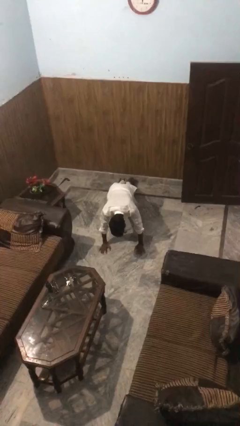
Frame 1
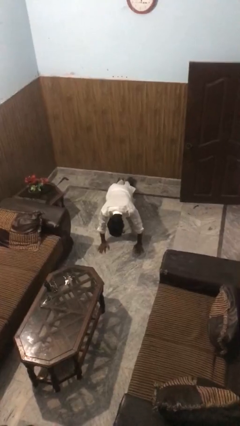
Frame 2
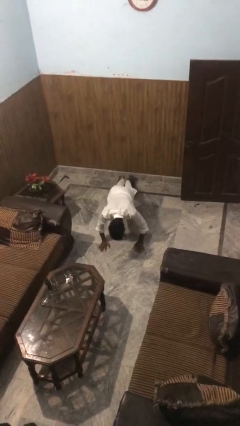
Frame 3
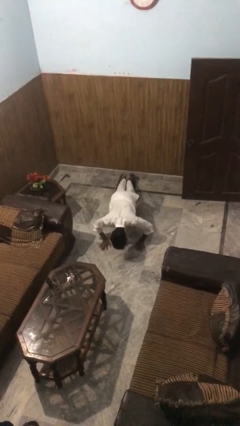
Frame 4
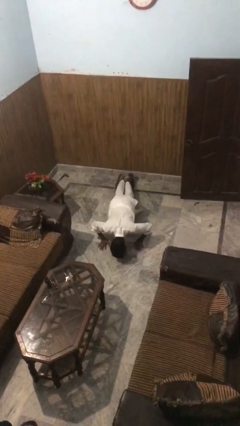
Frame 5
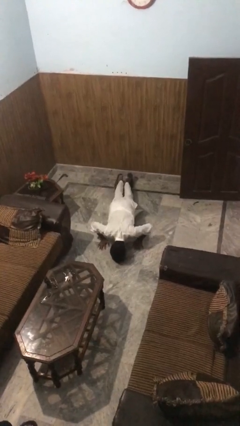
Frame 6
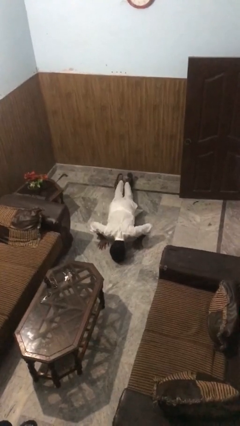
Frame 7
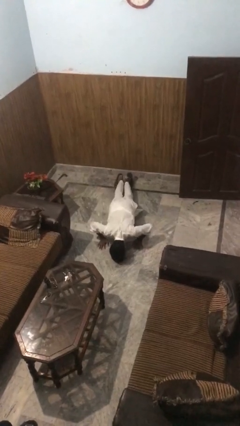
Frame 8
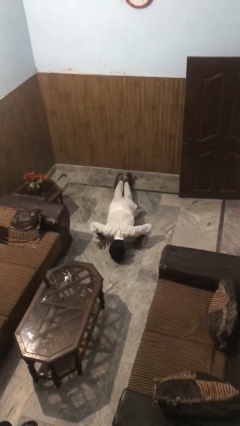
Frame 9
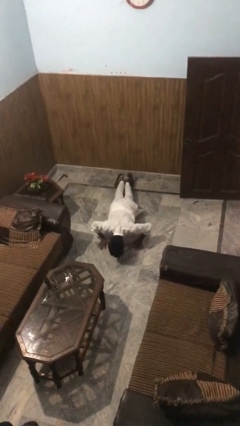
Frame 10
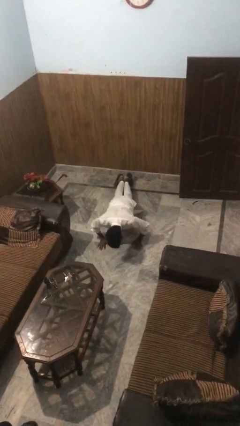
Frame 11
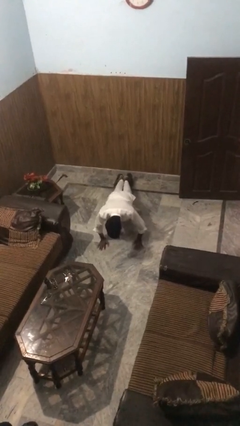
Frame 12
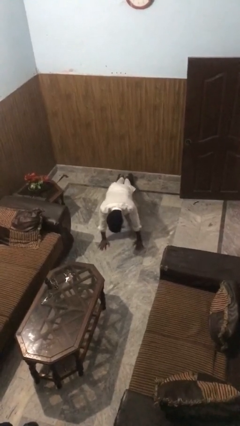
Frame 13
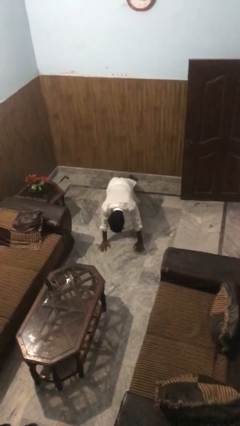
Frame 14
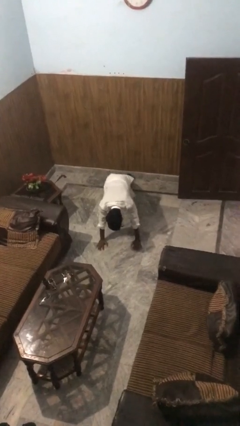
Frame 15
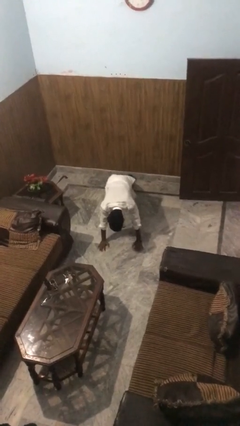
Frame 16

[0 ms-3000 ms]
person exercises with pushup

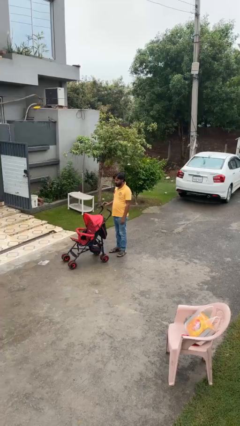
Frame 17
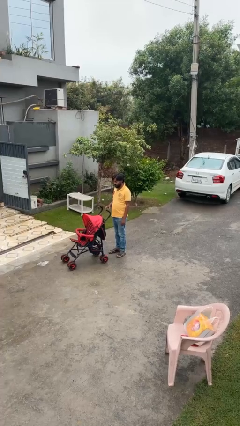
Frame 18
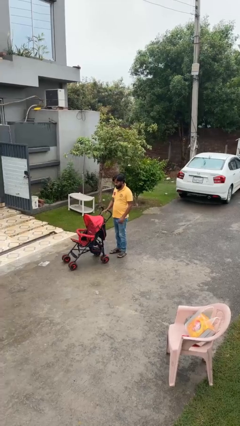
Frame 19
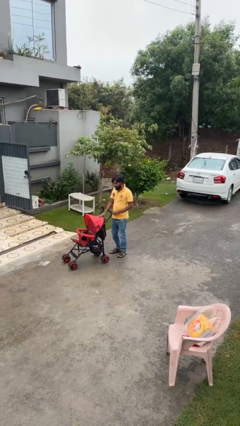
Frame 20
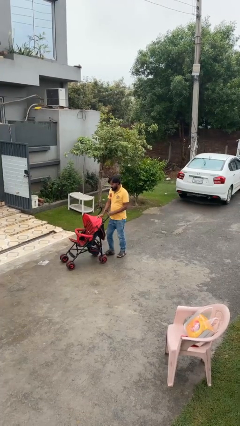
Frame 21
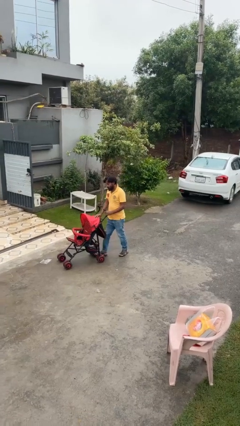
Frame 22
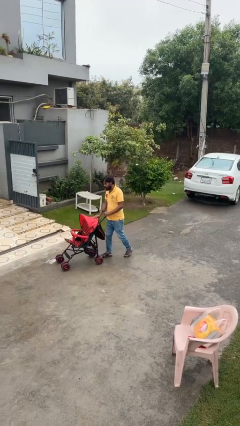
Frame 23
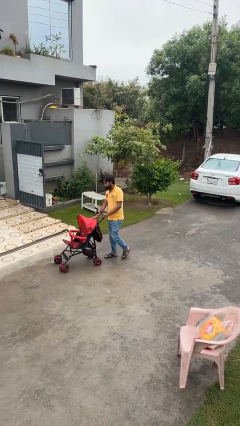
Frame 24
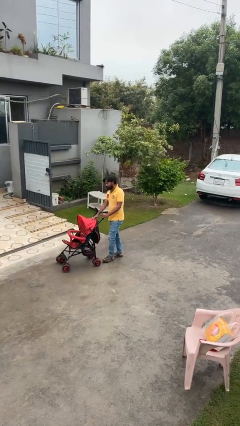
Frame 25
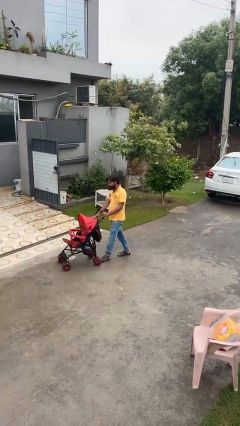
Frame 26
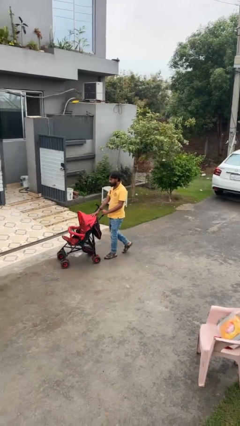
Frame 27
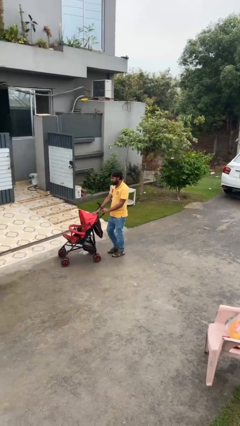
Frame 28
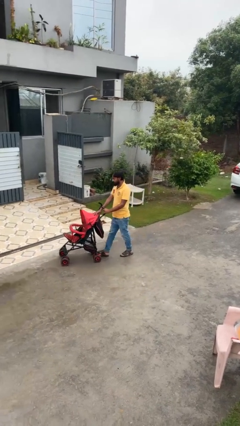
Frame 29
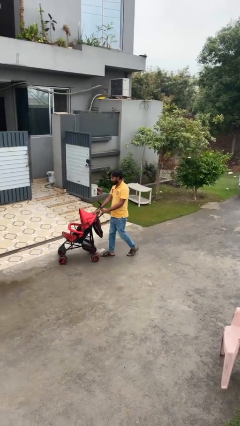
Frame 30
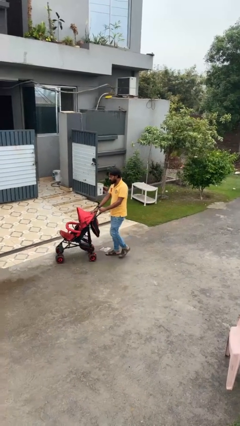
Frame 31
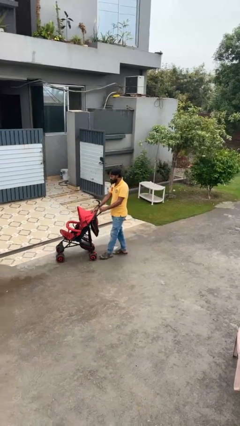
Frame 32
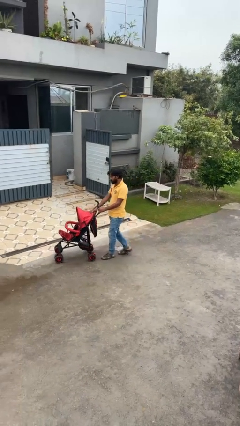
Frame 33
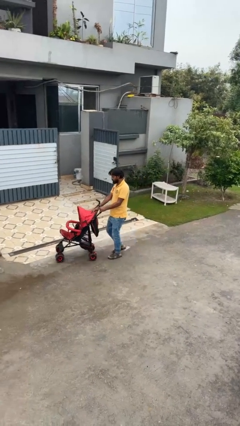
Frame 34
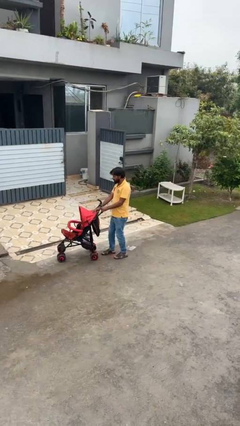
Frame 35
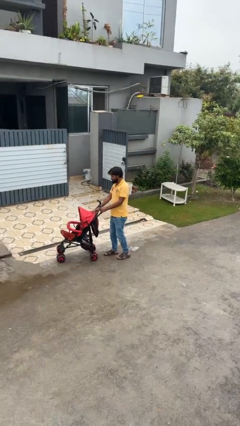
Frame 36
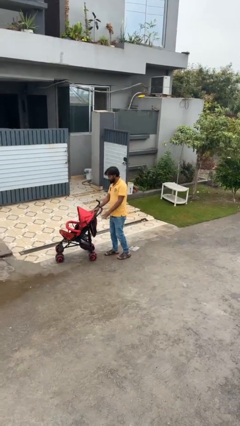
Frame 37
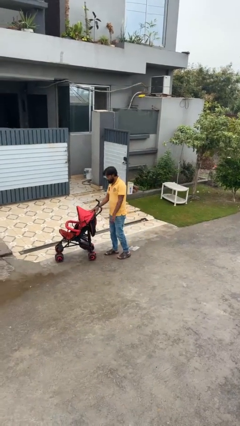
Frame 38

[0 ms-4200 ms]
person pushes wheeled cart

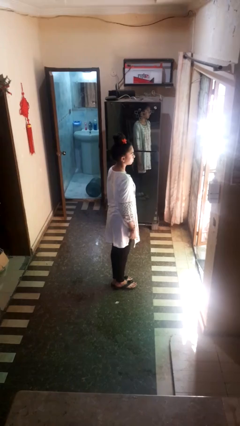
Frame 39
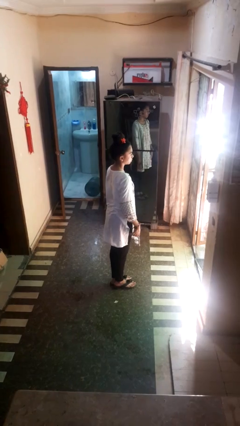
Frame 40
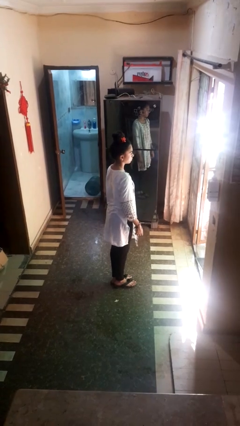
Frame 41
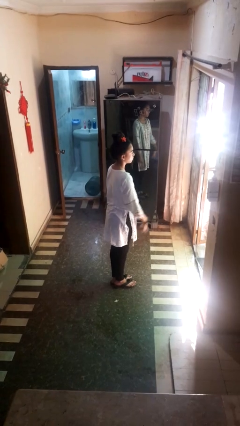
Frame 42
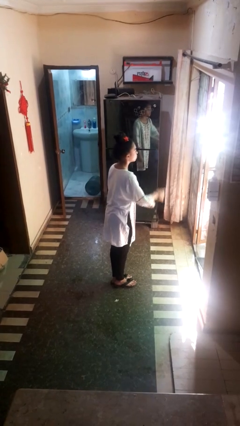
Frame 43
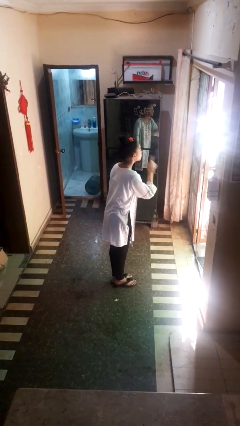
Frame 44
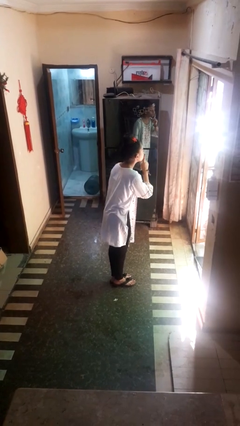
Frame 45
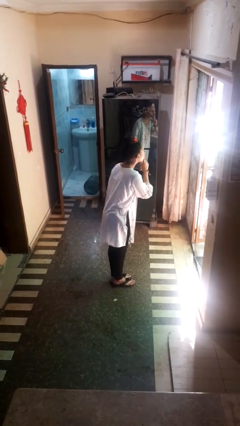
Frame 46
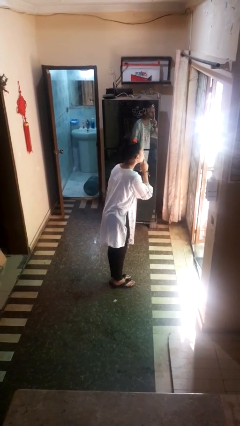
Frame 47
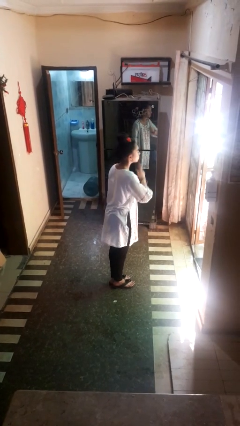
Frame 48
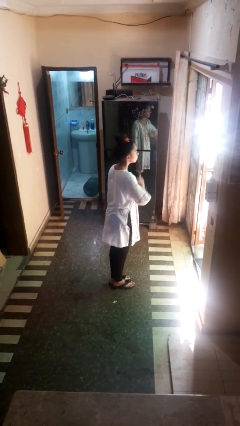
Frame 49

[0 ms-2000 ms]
person gestures be quiet

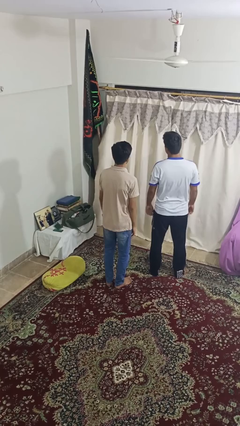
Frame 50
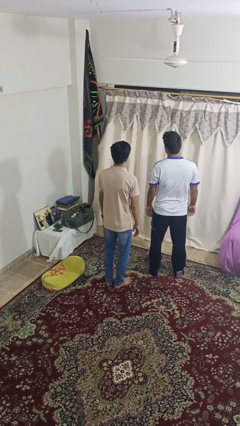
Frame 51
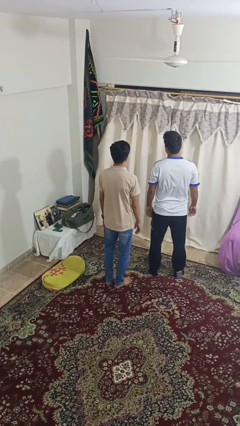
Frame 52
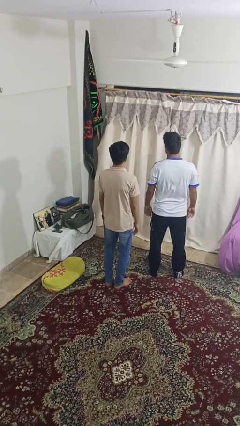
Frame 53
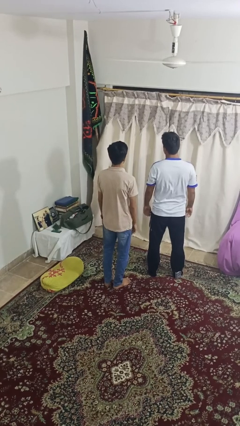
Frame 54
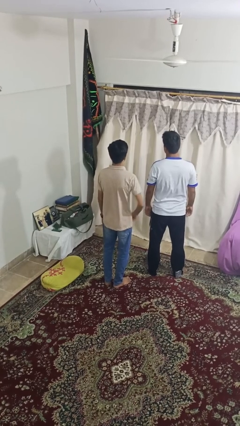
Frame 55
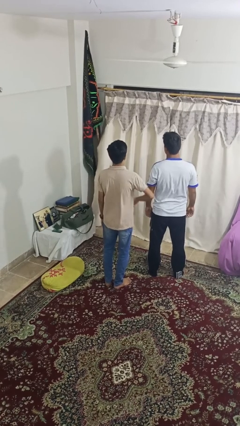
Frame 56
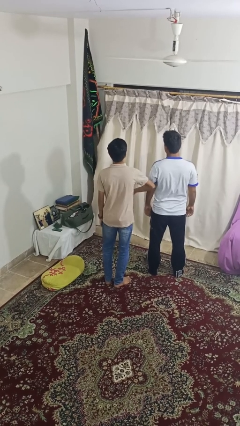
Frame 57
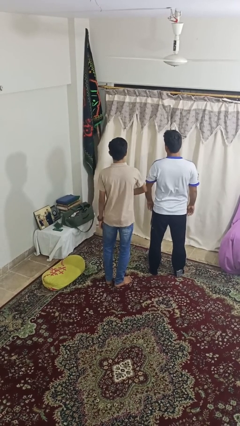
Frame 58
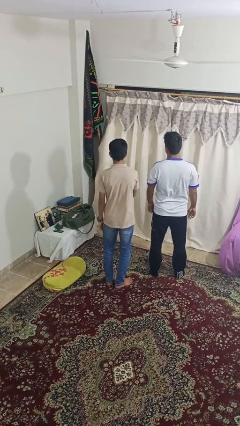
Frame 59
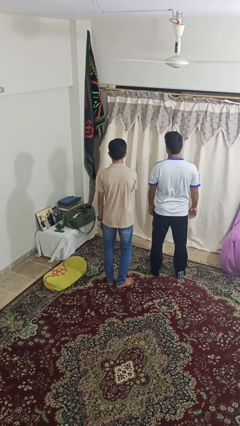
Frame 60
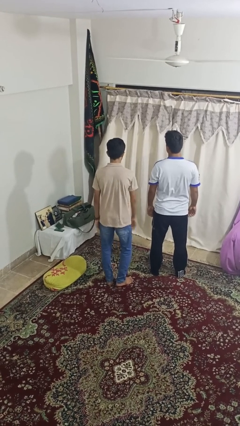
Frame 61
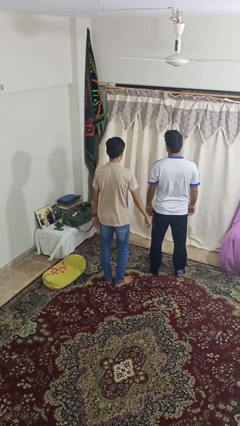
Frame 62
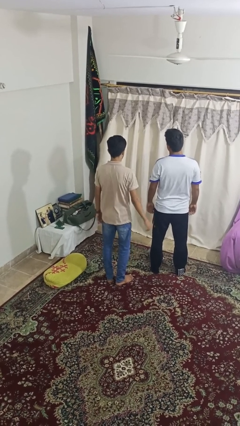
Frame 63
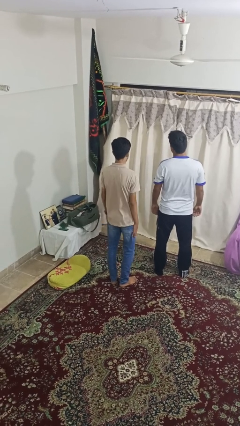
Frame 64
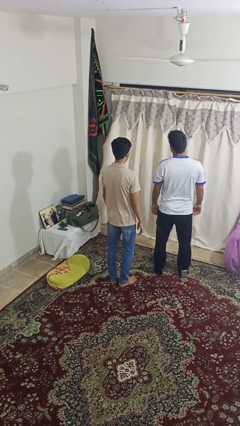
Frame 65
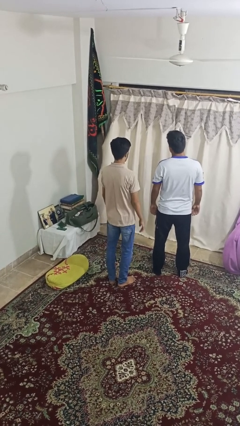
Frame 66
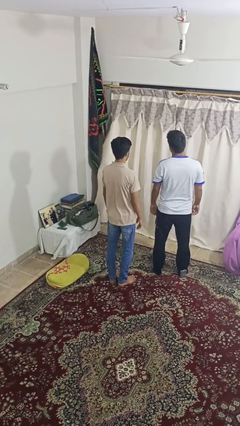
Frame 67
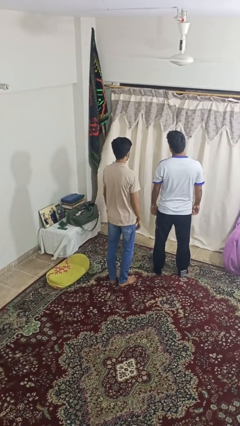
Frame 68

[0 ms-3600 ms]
person nudges person with elbow

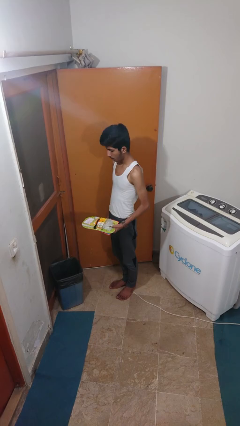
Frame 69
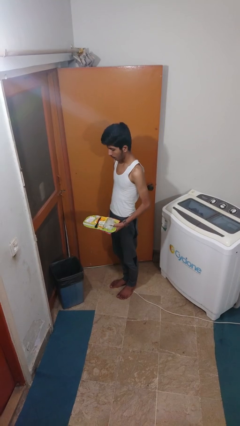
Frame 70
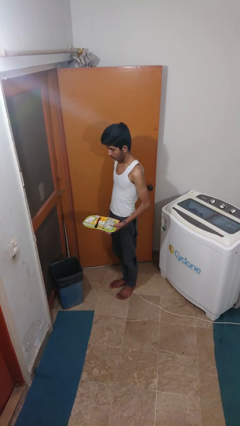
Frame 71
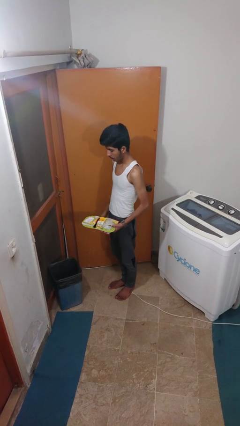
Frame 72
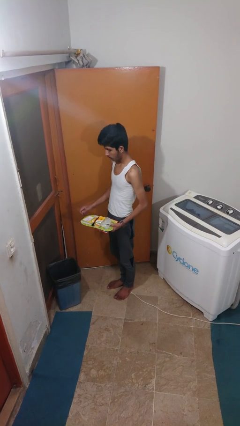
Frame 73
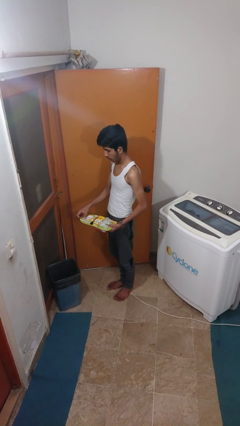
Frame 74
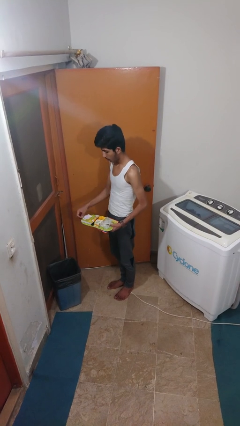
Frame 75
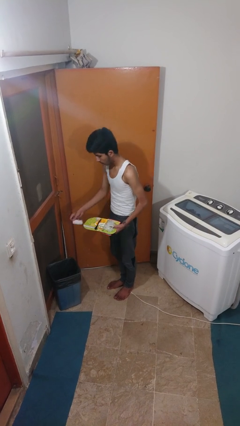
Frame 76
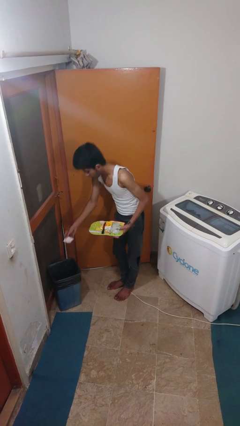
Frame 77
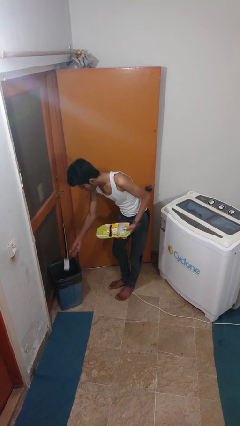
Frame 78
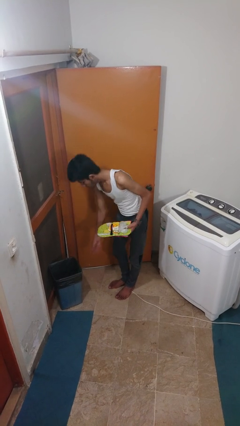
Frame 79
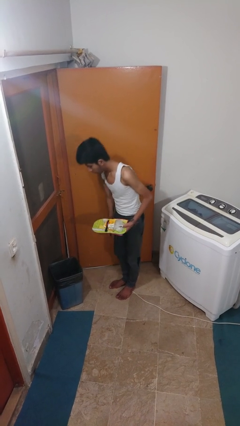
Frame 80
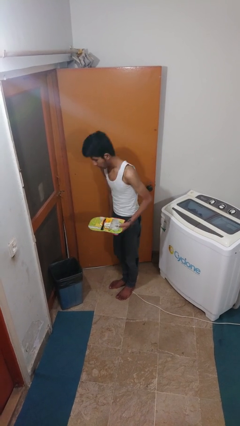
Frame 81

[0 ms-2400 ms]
person discards trash

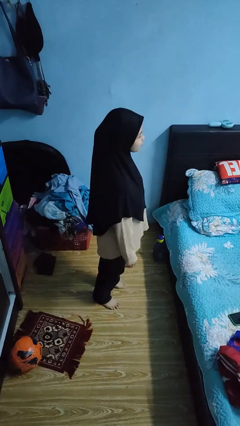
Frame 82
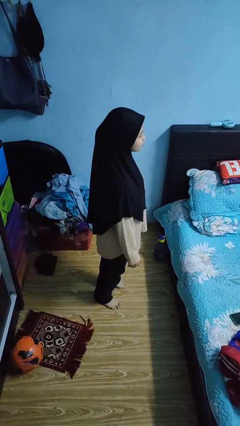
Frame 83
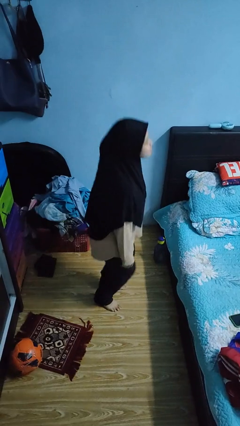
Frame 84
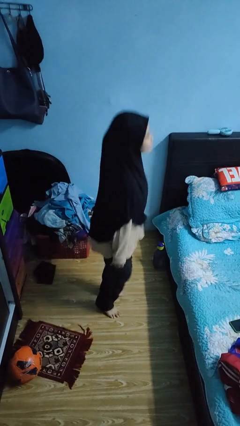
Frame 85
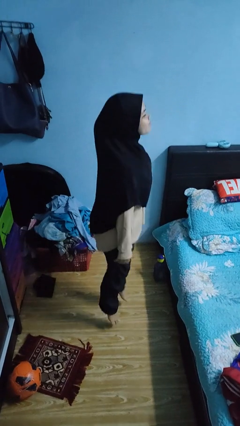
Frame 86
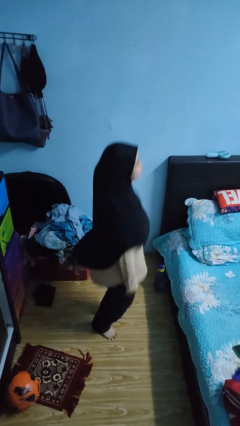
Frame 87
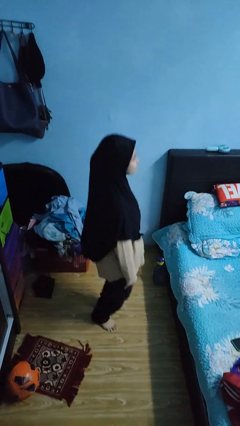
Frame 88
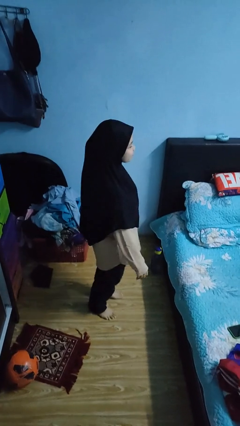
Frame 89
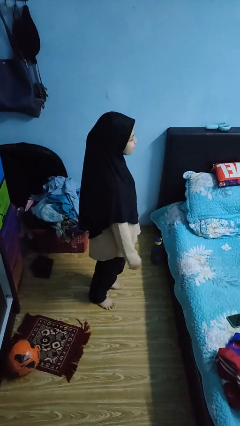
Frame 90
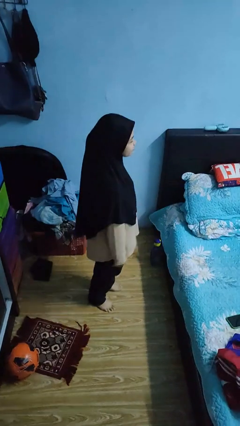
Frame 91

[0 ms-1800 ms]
person jumps

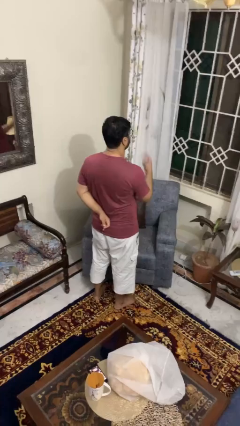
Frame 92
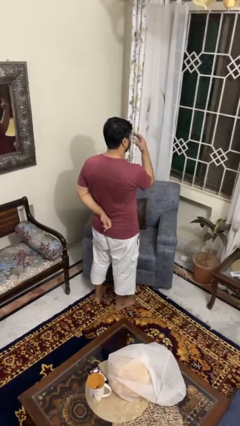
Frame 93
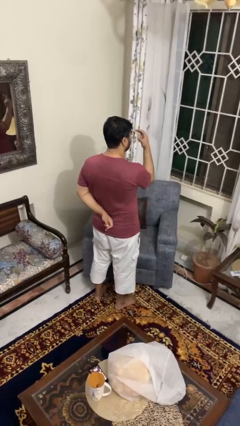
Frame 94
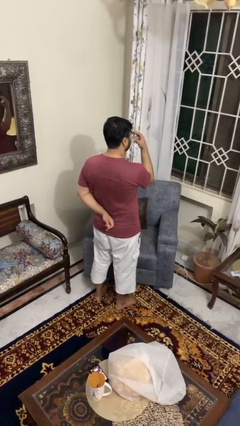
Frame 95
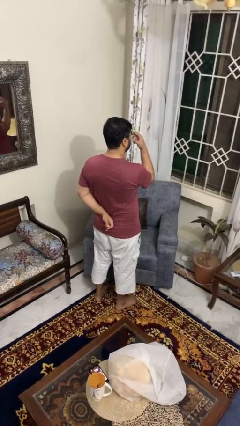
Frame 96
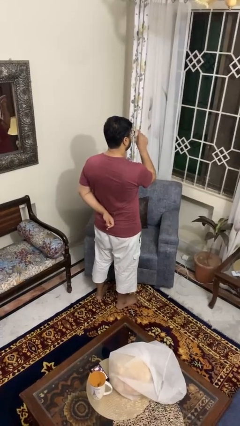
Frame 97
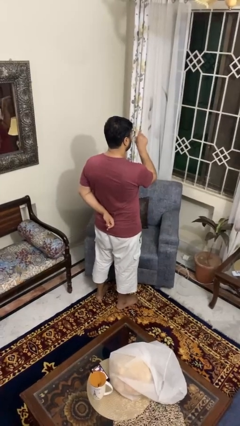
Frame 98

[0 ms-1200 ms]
person gestures watch closely
